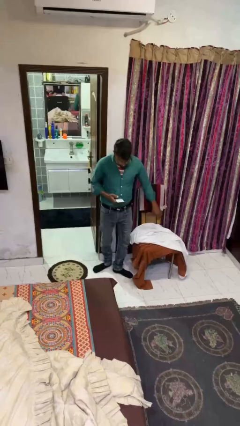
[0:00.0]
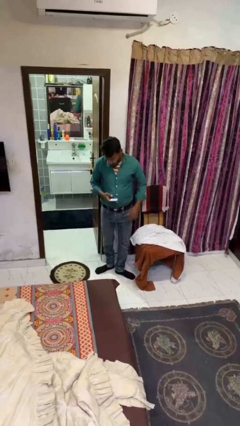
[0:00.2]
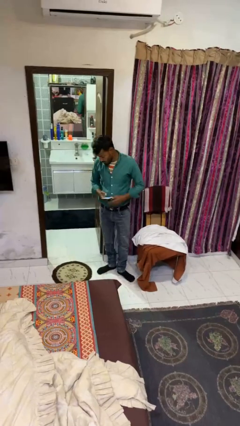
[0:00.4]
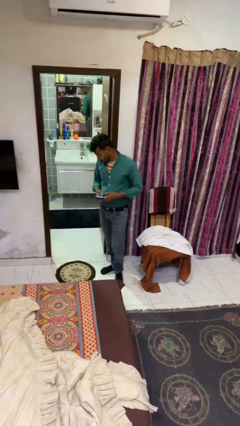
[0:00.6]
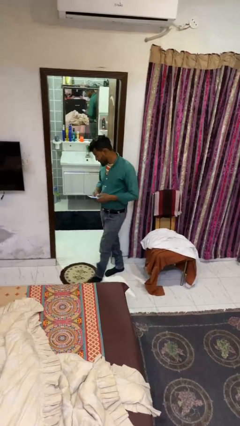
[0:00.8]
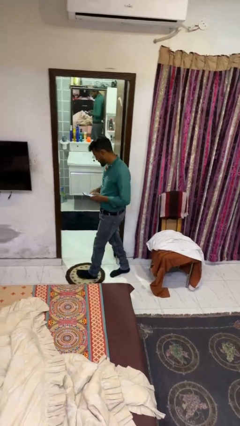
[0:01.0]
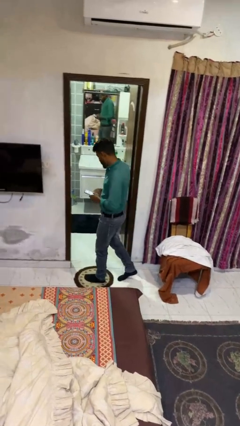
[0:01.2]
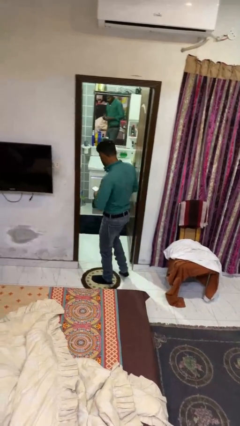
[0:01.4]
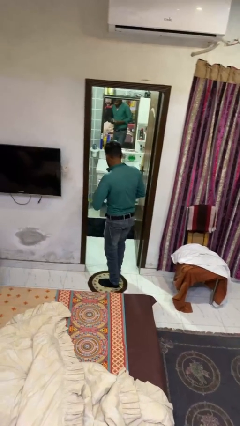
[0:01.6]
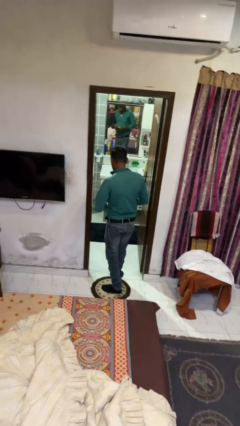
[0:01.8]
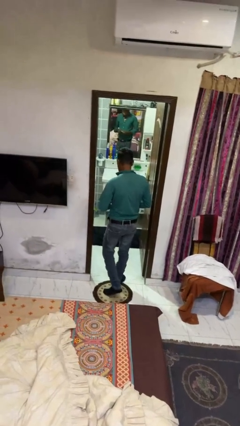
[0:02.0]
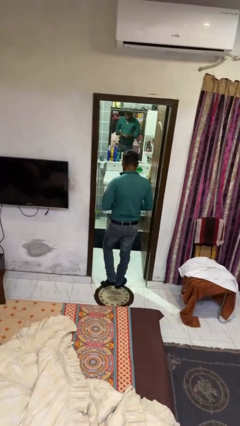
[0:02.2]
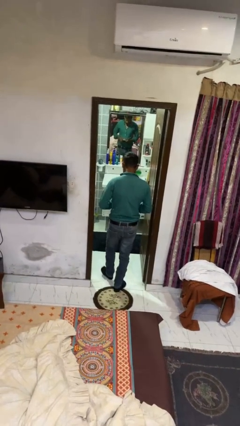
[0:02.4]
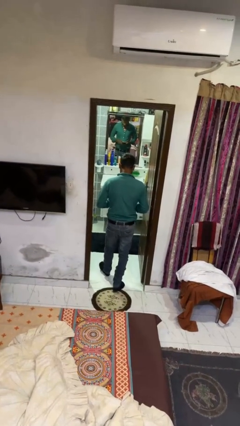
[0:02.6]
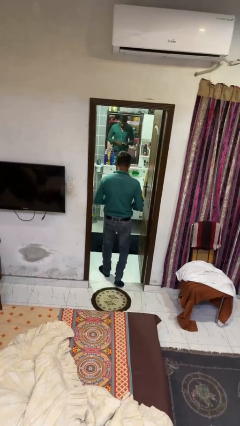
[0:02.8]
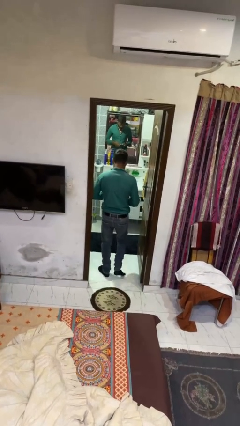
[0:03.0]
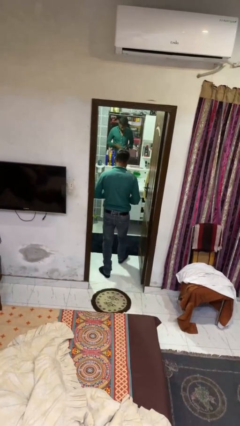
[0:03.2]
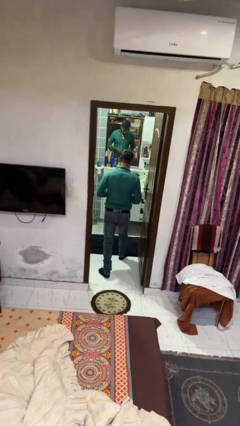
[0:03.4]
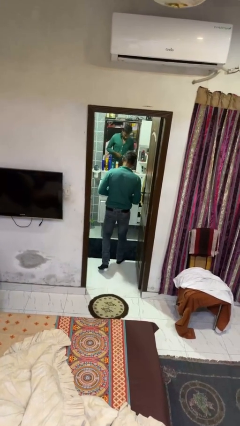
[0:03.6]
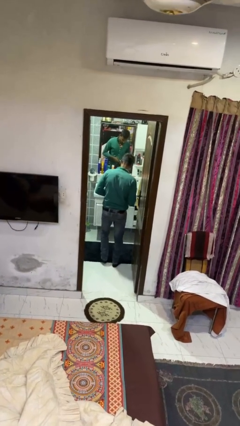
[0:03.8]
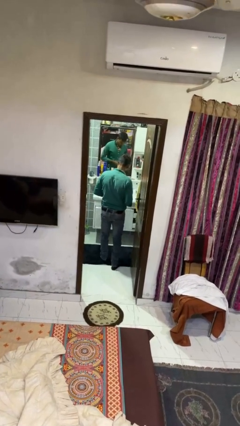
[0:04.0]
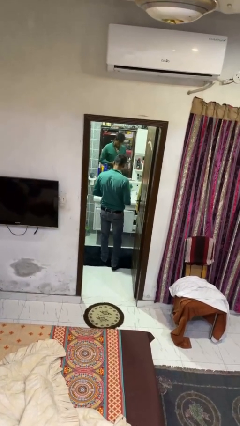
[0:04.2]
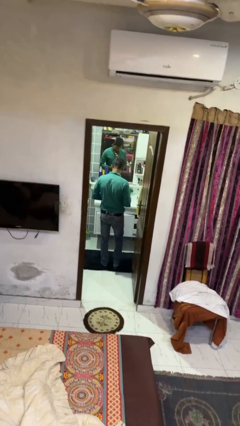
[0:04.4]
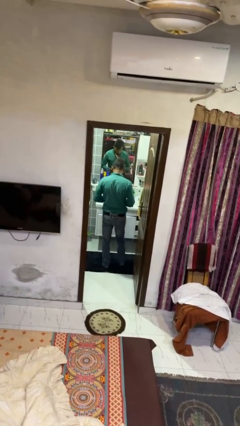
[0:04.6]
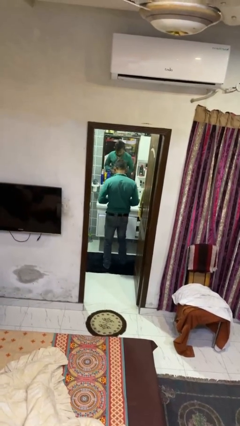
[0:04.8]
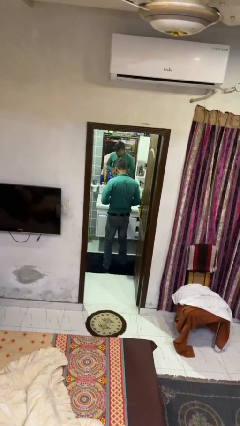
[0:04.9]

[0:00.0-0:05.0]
person exits scene through structure

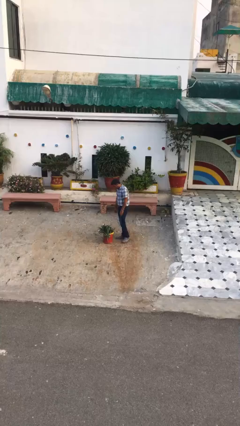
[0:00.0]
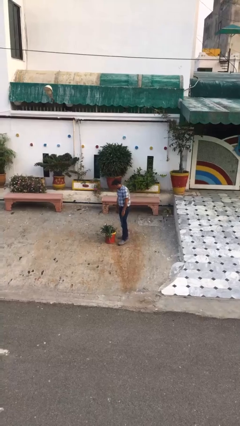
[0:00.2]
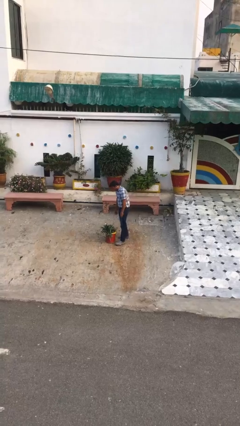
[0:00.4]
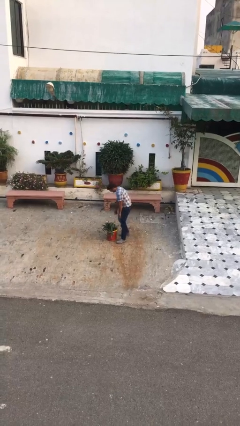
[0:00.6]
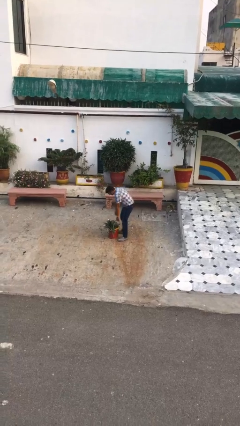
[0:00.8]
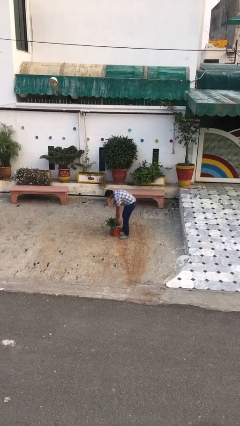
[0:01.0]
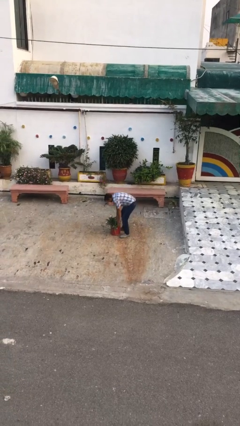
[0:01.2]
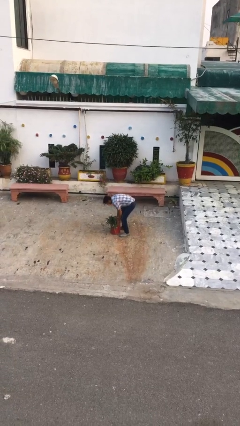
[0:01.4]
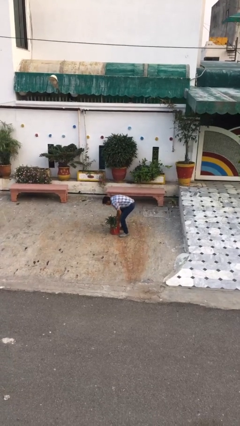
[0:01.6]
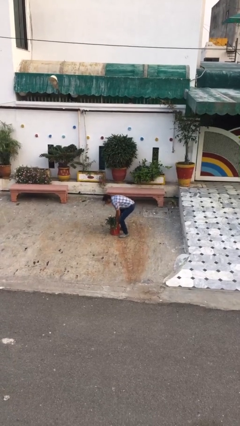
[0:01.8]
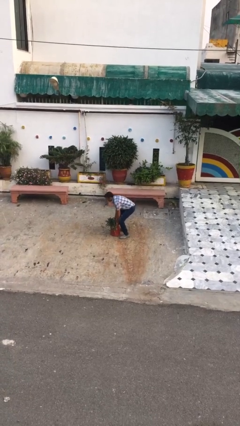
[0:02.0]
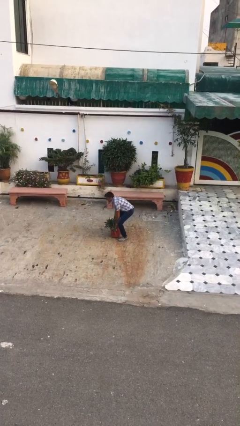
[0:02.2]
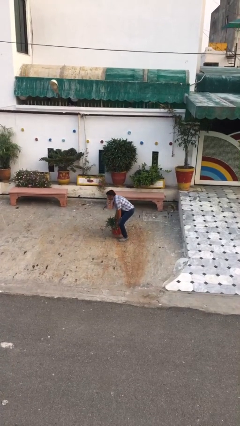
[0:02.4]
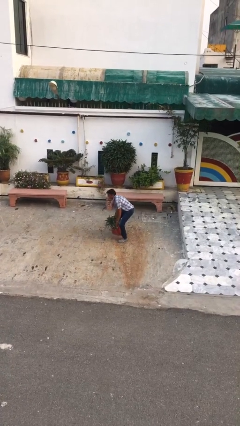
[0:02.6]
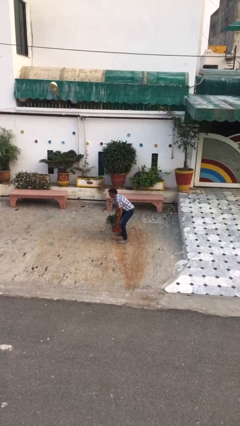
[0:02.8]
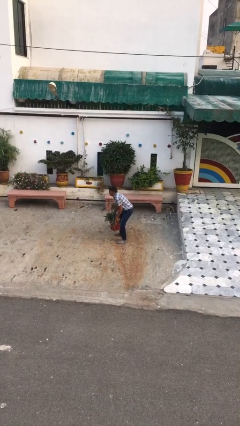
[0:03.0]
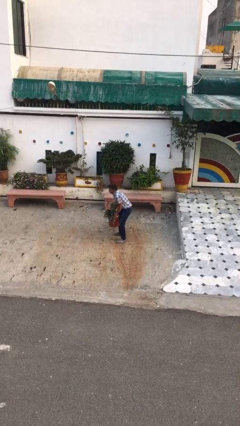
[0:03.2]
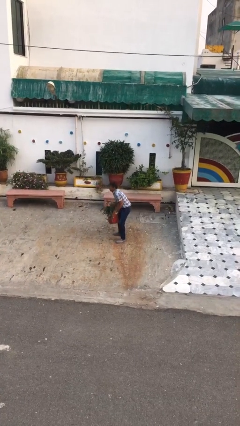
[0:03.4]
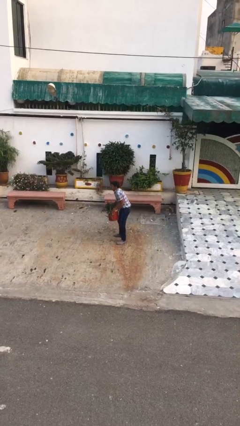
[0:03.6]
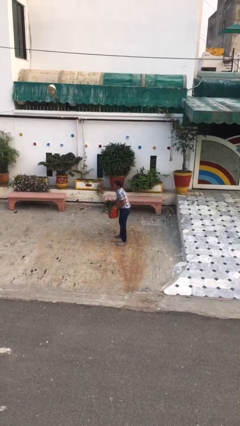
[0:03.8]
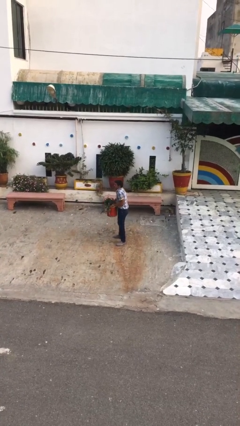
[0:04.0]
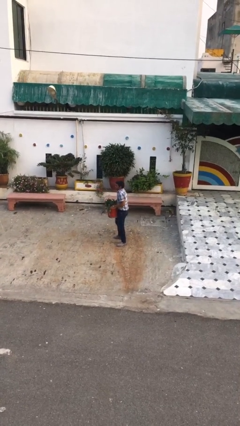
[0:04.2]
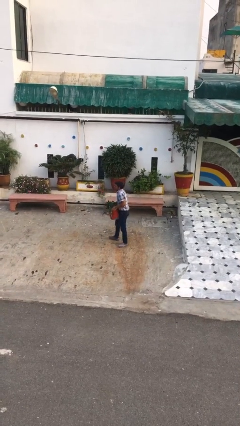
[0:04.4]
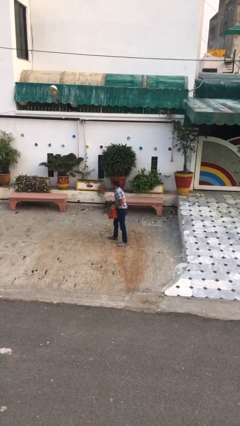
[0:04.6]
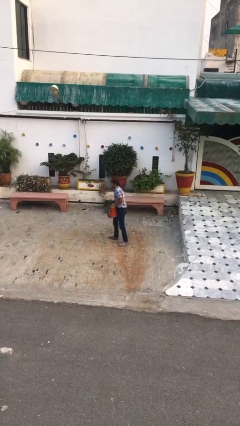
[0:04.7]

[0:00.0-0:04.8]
person picks up object from floor

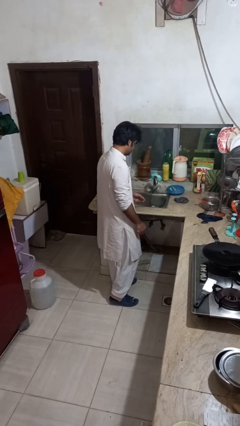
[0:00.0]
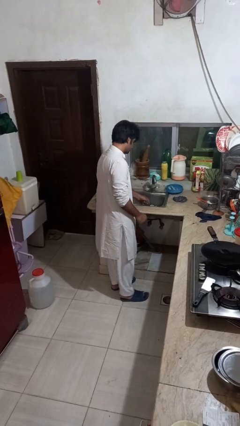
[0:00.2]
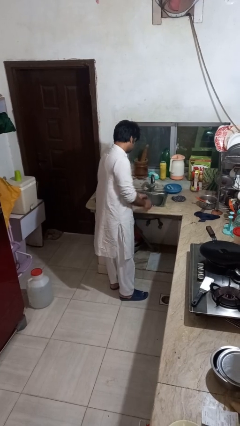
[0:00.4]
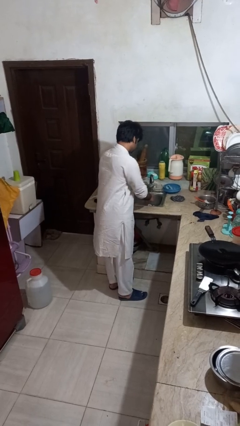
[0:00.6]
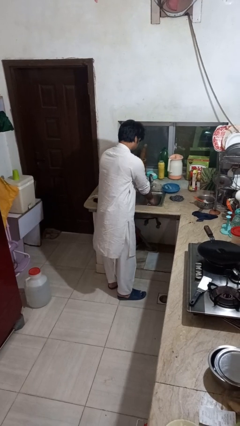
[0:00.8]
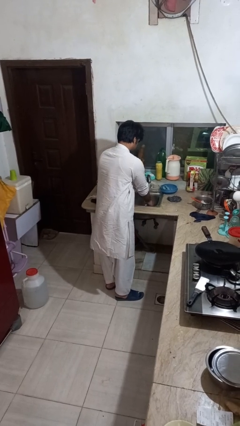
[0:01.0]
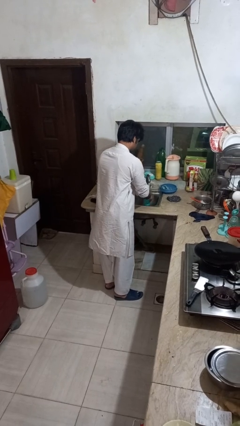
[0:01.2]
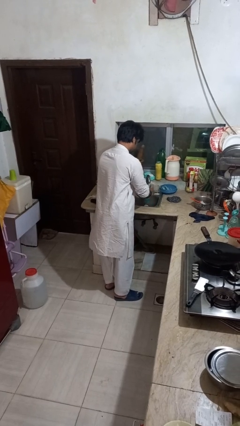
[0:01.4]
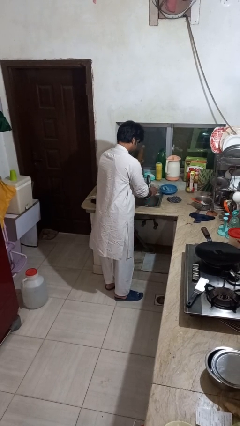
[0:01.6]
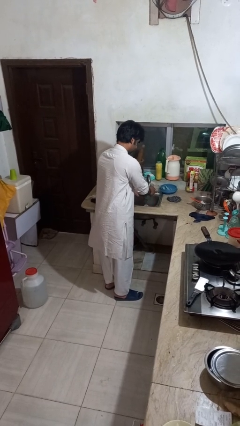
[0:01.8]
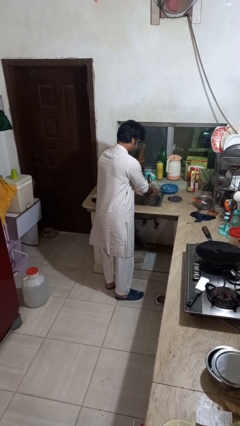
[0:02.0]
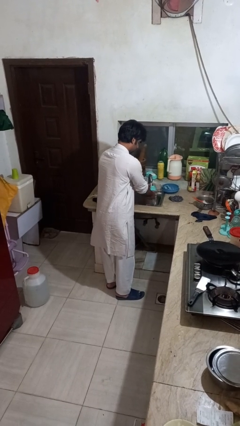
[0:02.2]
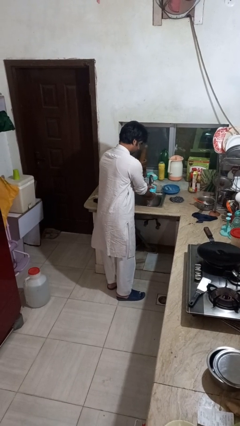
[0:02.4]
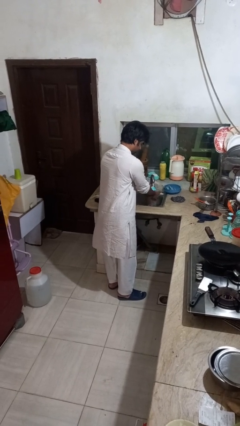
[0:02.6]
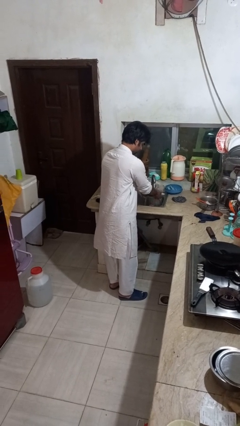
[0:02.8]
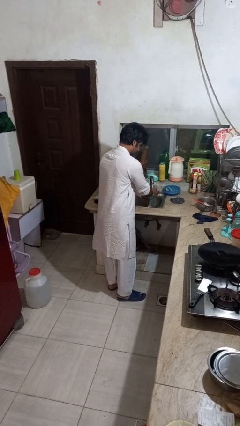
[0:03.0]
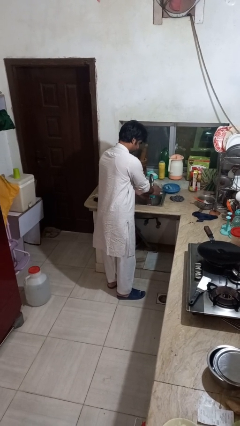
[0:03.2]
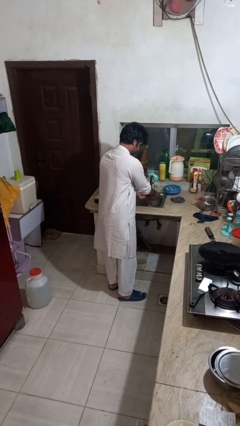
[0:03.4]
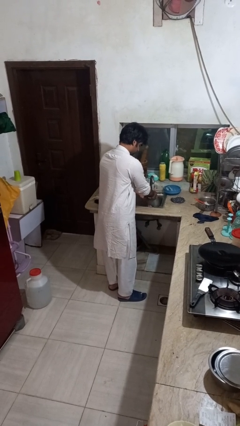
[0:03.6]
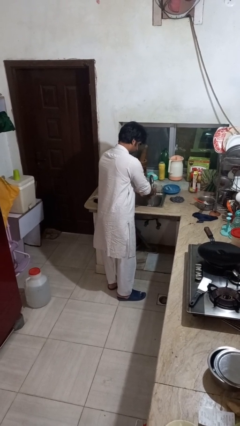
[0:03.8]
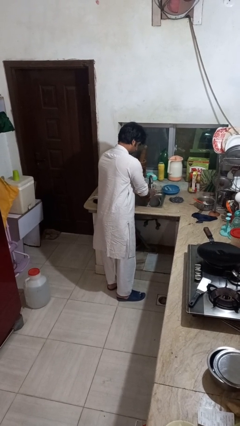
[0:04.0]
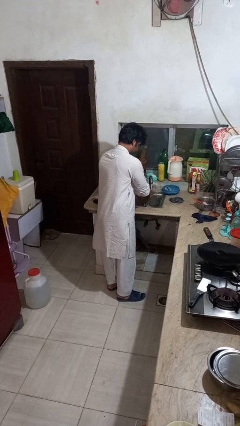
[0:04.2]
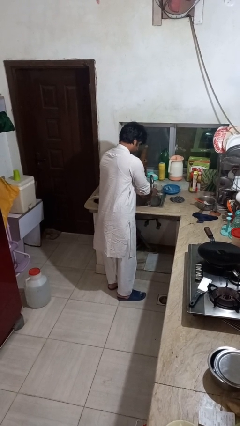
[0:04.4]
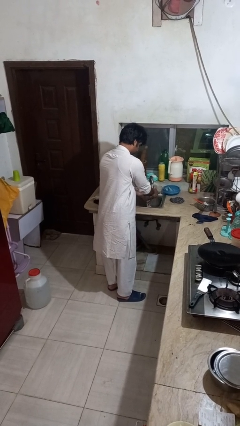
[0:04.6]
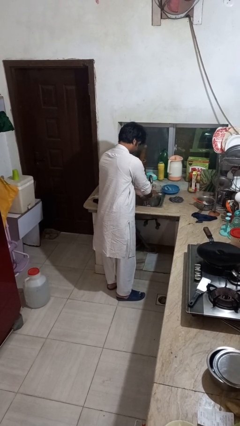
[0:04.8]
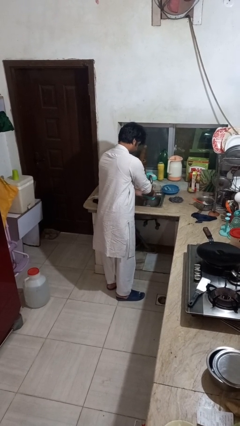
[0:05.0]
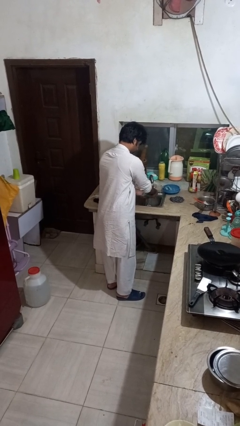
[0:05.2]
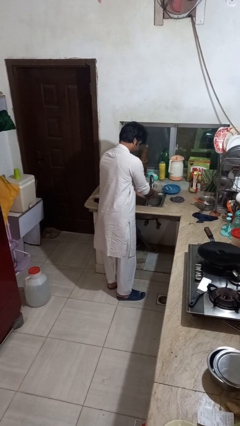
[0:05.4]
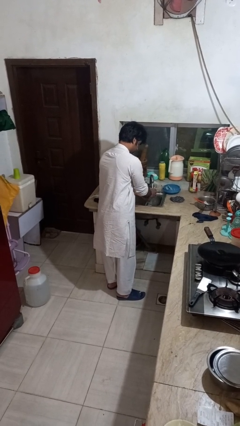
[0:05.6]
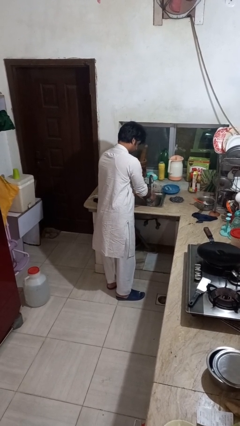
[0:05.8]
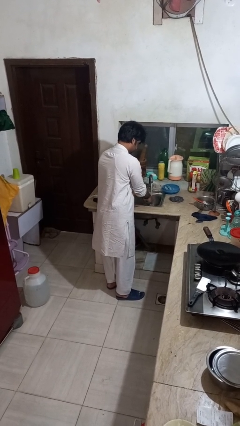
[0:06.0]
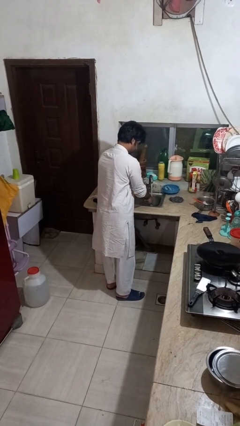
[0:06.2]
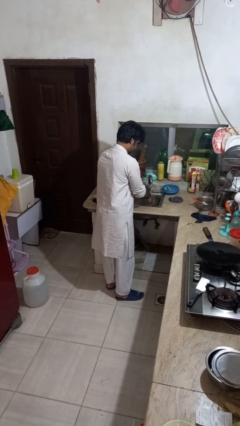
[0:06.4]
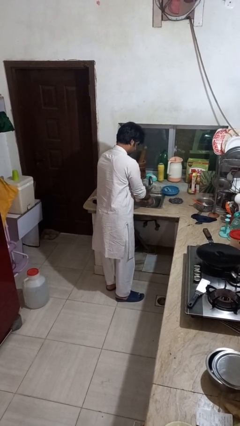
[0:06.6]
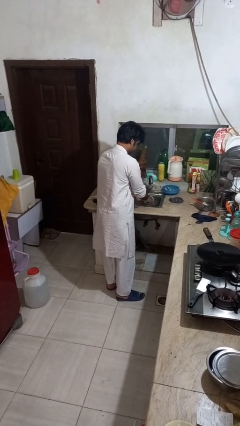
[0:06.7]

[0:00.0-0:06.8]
person washes dish

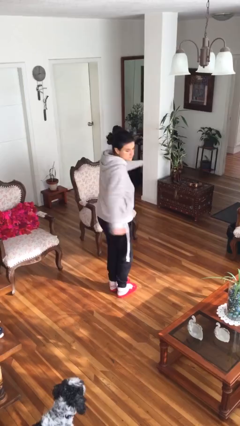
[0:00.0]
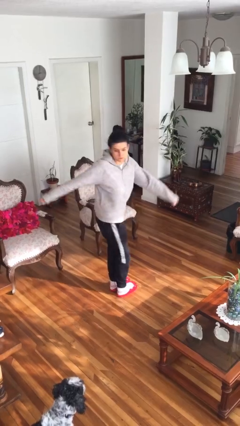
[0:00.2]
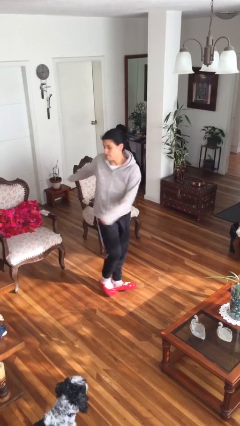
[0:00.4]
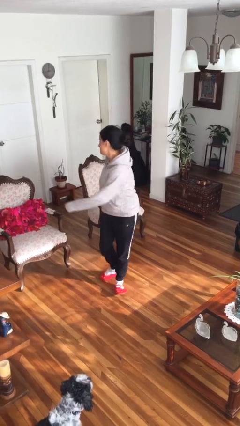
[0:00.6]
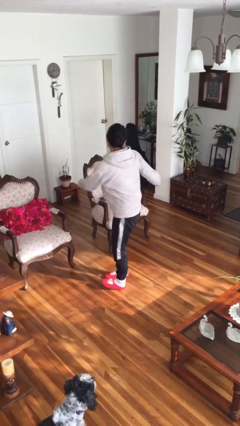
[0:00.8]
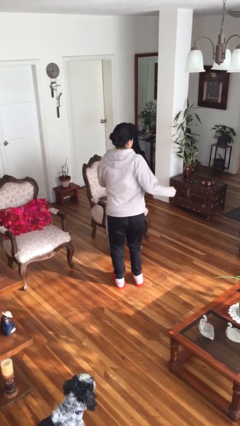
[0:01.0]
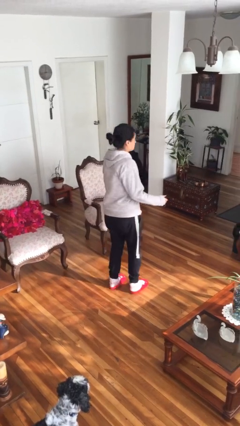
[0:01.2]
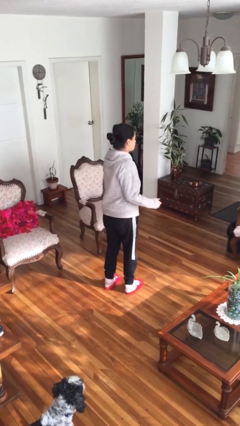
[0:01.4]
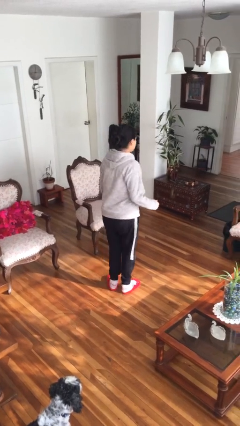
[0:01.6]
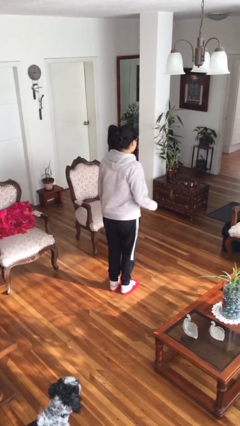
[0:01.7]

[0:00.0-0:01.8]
person twirls
